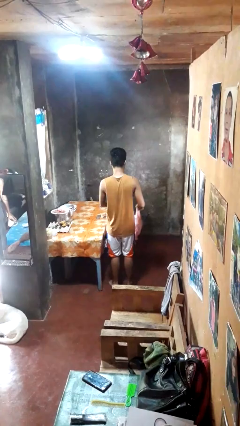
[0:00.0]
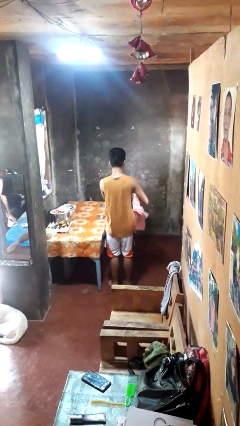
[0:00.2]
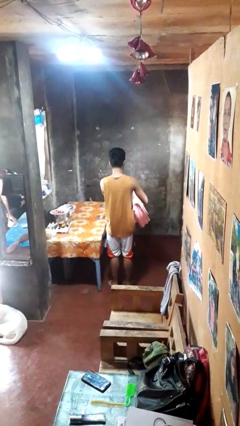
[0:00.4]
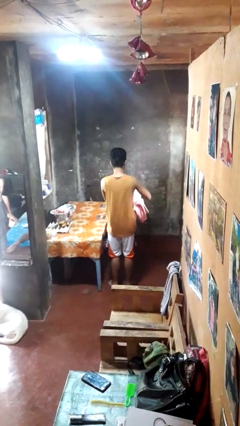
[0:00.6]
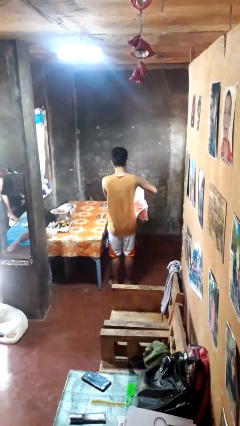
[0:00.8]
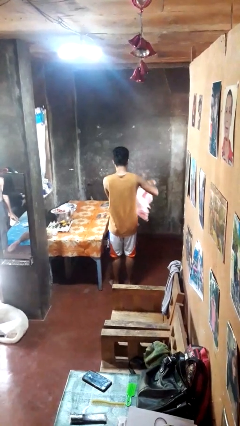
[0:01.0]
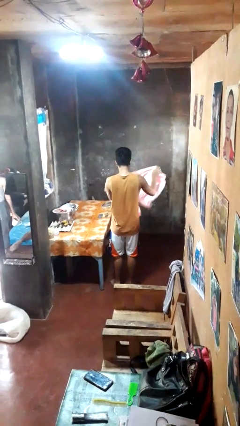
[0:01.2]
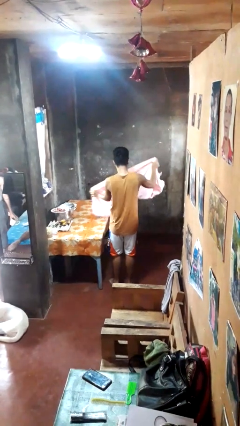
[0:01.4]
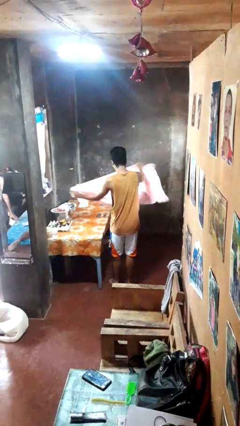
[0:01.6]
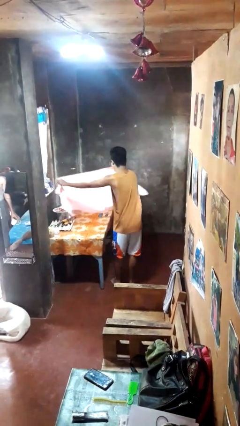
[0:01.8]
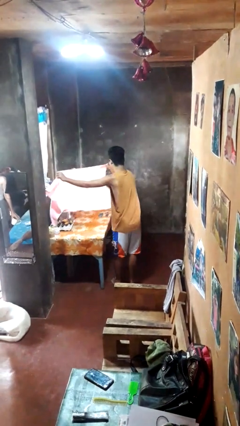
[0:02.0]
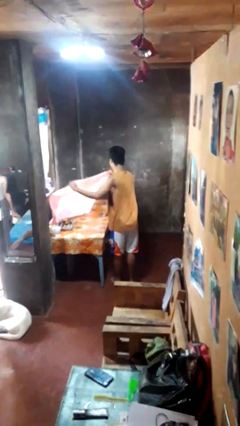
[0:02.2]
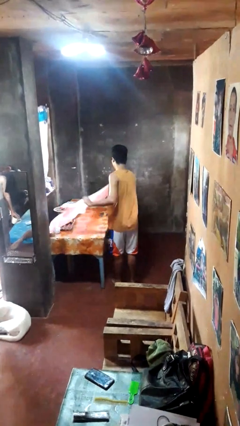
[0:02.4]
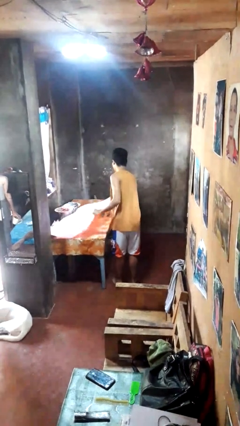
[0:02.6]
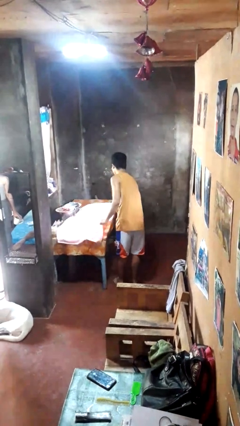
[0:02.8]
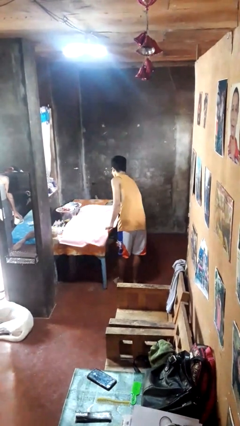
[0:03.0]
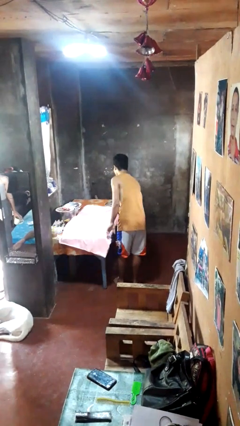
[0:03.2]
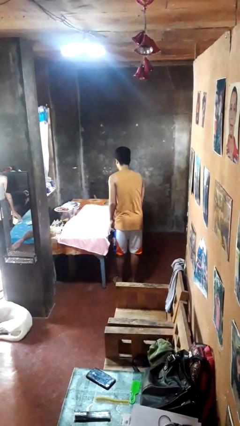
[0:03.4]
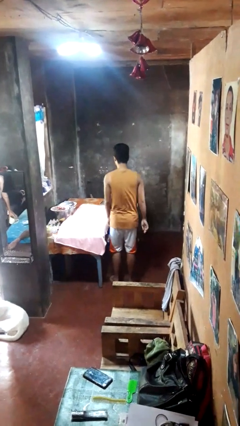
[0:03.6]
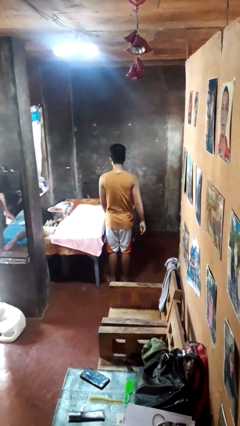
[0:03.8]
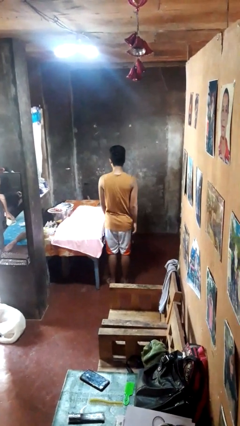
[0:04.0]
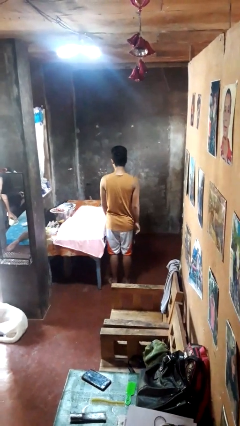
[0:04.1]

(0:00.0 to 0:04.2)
person spreads tablecloth

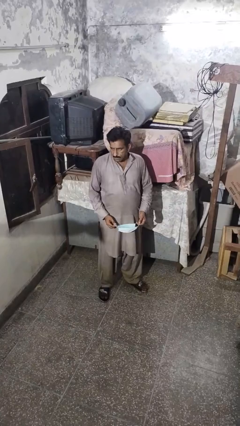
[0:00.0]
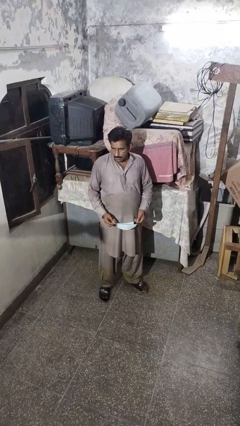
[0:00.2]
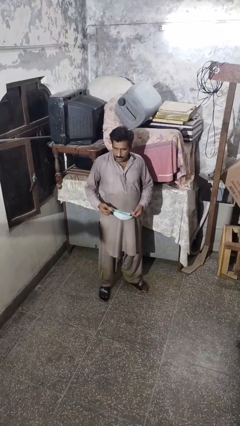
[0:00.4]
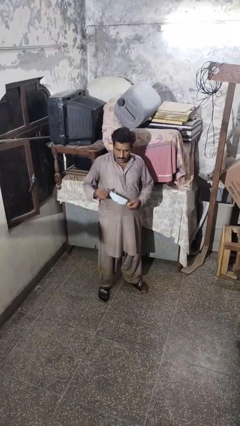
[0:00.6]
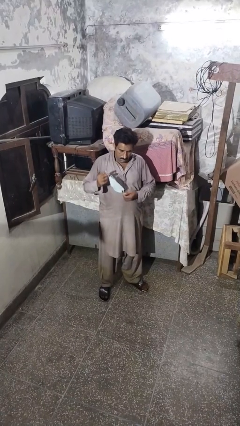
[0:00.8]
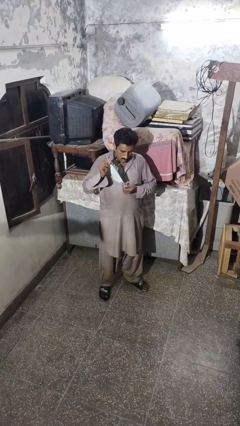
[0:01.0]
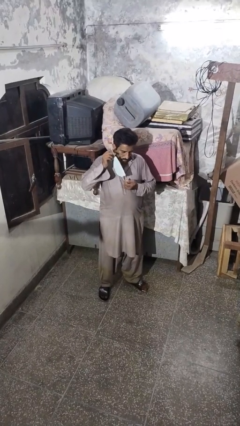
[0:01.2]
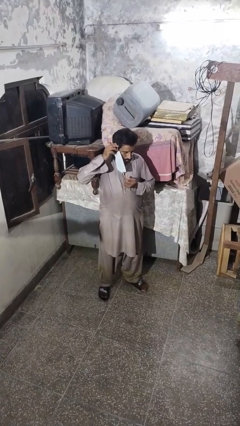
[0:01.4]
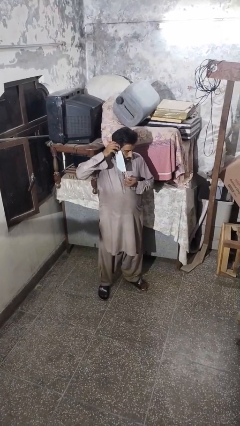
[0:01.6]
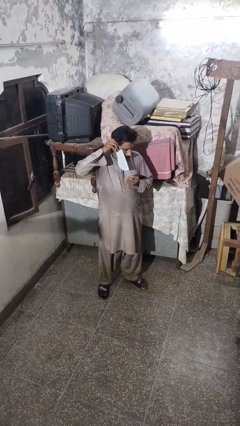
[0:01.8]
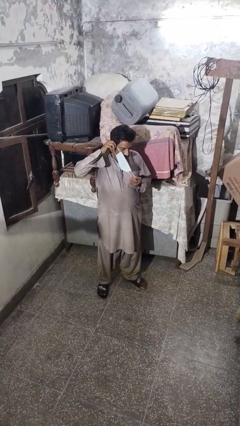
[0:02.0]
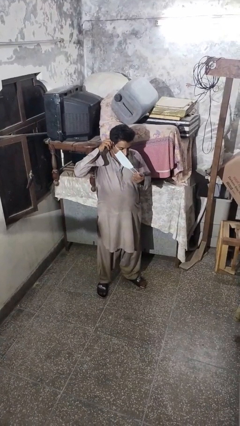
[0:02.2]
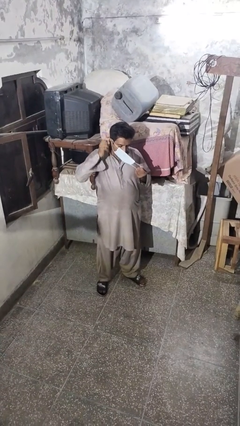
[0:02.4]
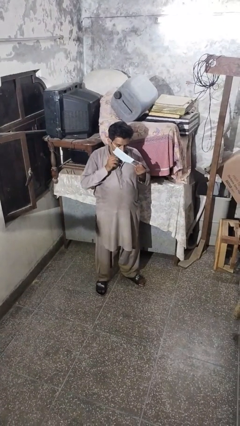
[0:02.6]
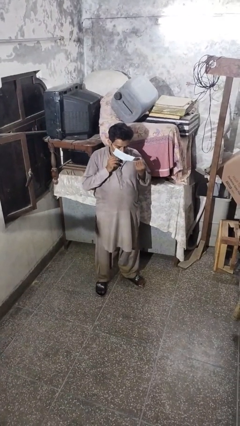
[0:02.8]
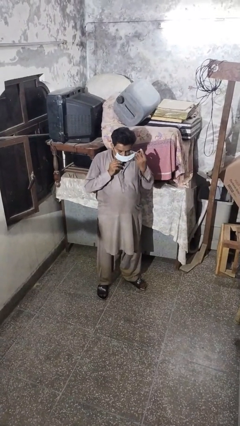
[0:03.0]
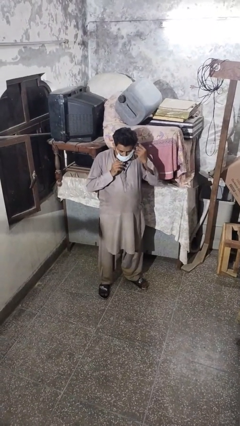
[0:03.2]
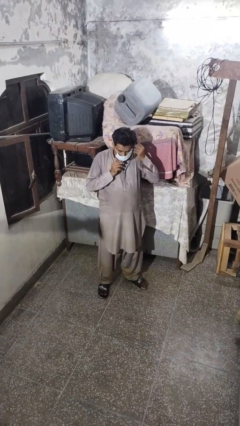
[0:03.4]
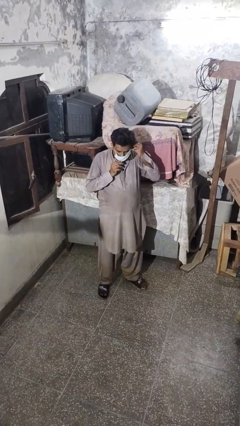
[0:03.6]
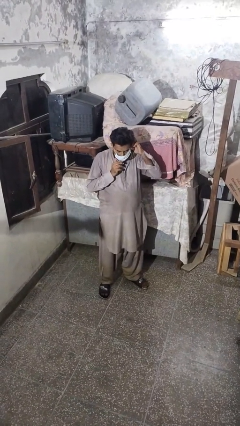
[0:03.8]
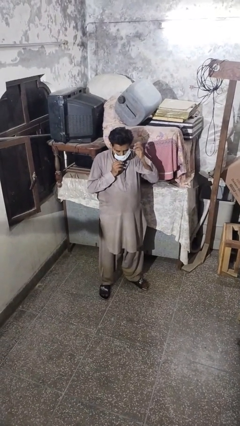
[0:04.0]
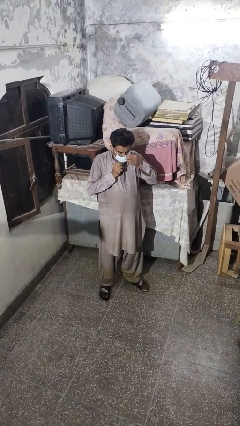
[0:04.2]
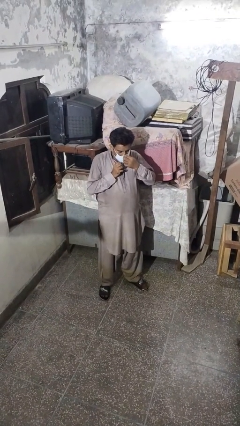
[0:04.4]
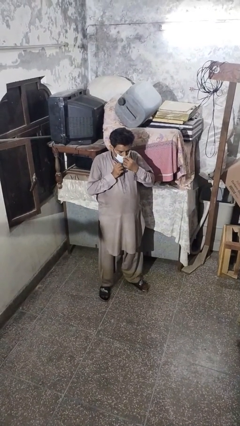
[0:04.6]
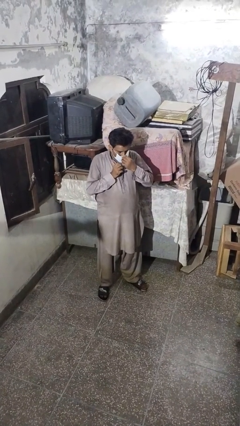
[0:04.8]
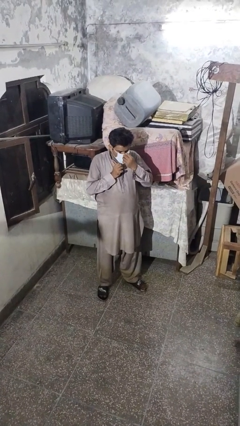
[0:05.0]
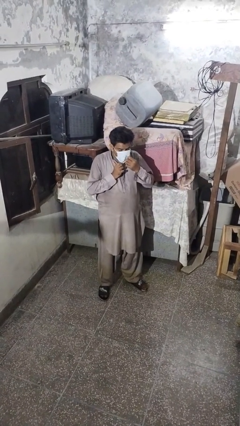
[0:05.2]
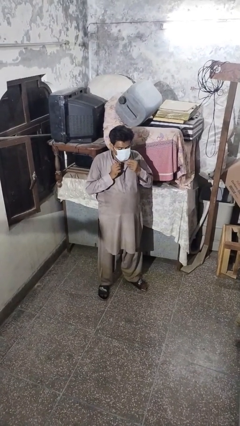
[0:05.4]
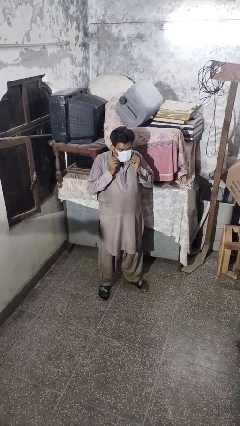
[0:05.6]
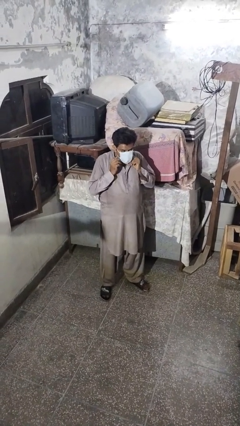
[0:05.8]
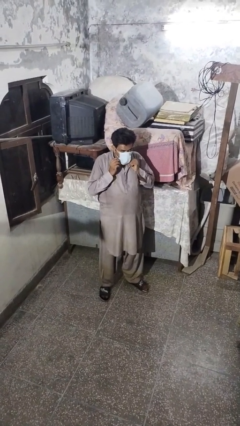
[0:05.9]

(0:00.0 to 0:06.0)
person puts on facemask

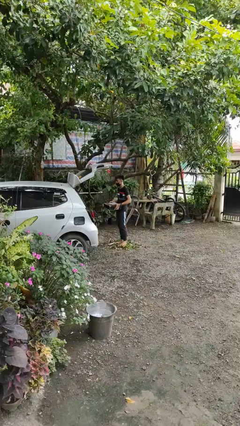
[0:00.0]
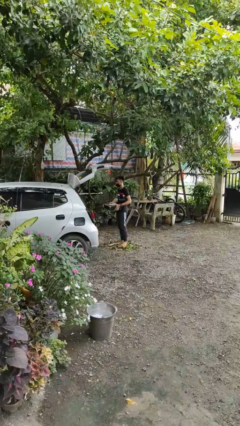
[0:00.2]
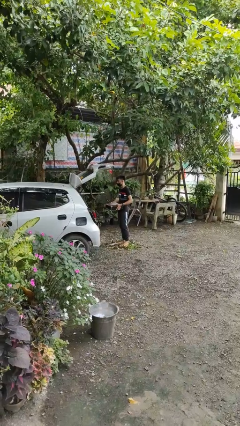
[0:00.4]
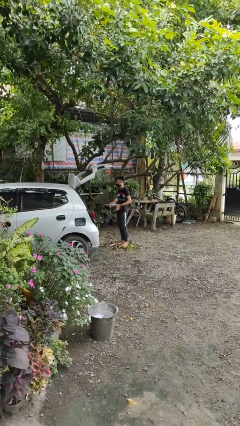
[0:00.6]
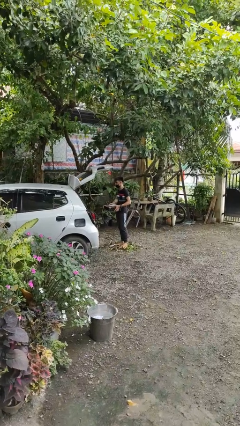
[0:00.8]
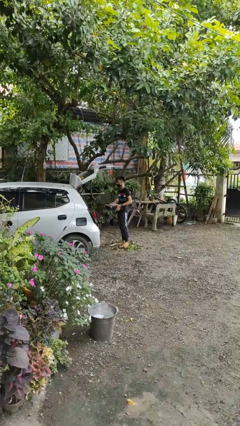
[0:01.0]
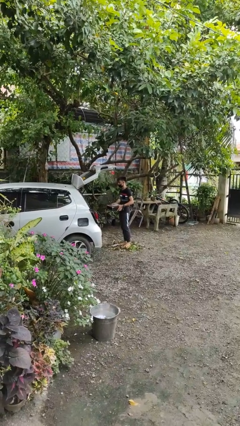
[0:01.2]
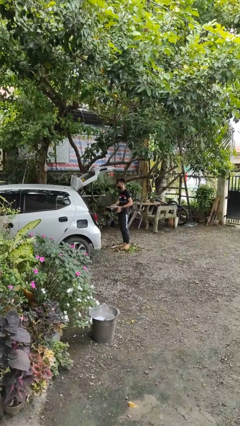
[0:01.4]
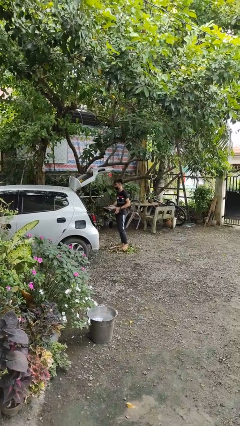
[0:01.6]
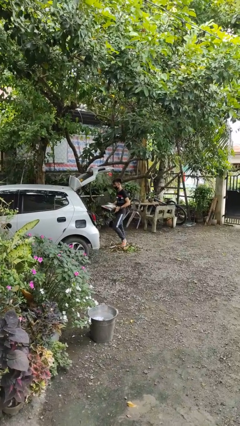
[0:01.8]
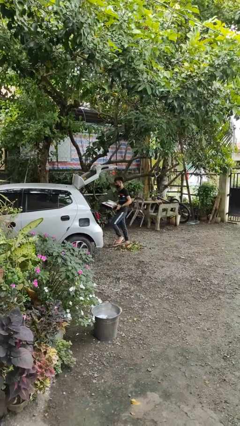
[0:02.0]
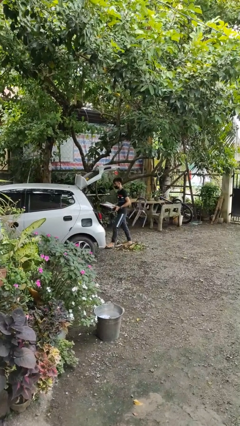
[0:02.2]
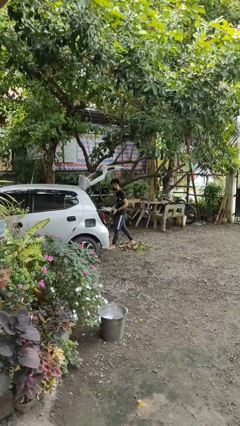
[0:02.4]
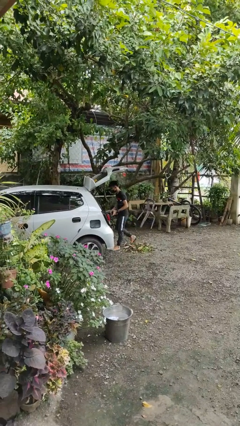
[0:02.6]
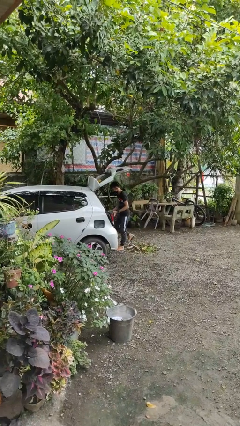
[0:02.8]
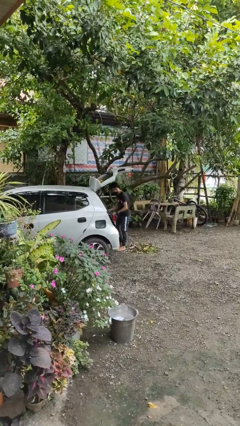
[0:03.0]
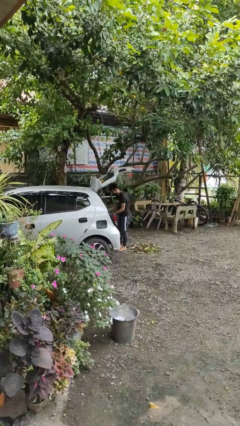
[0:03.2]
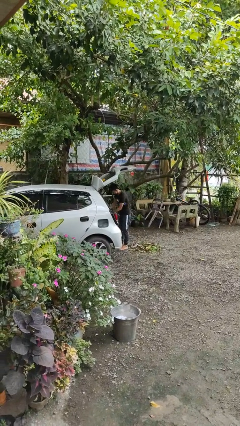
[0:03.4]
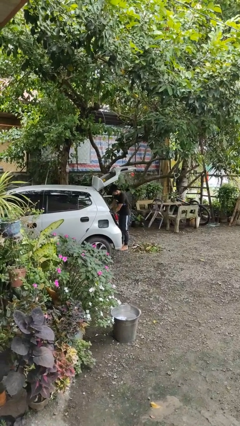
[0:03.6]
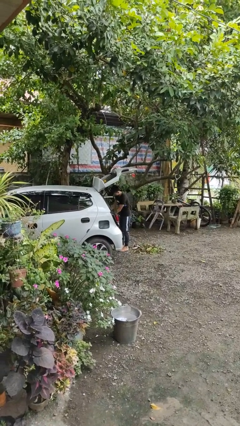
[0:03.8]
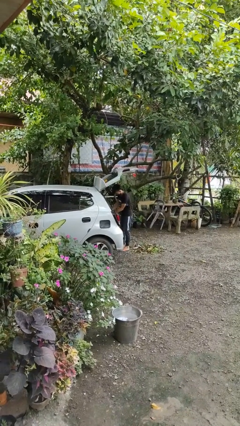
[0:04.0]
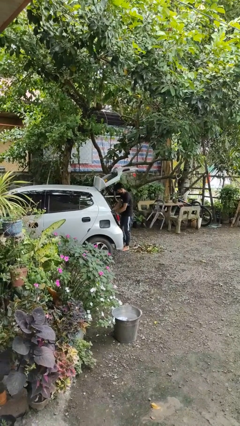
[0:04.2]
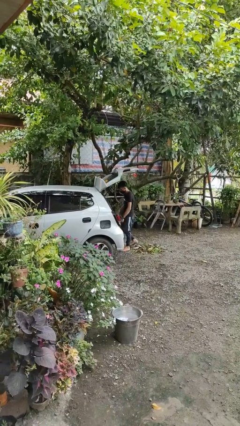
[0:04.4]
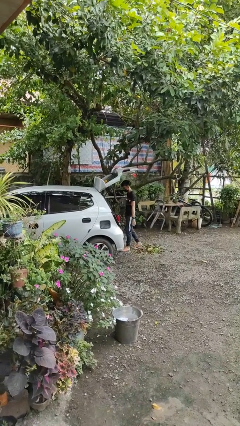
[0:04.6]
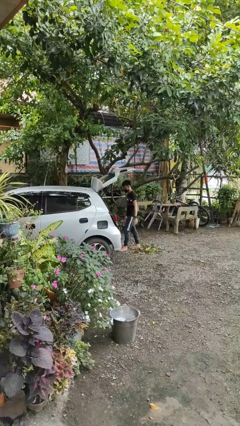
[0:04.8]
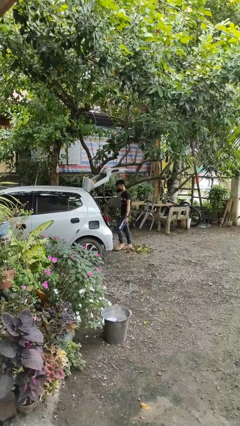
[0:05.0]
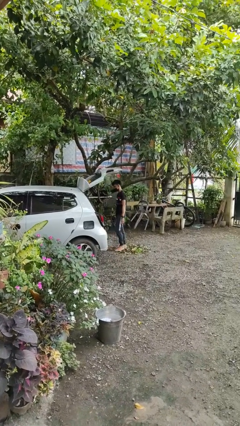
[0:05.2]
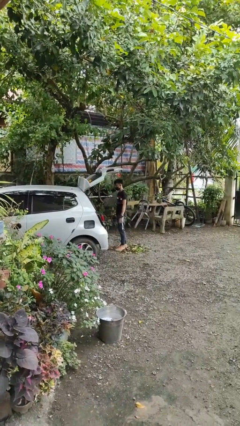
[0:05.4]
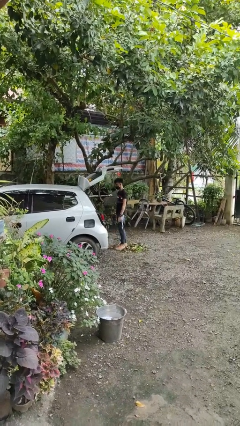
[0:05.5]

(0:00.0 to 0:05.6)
person loads car

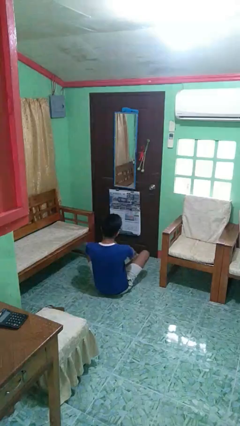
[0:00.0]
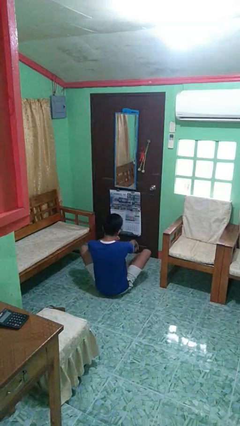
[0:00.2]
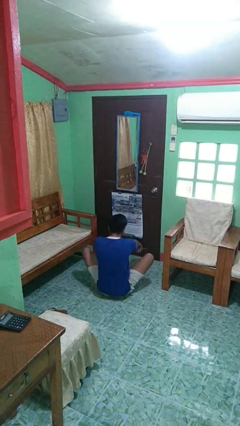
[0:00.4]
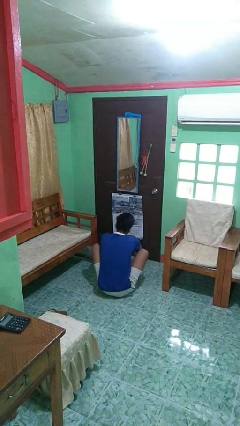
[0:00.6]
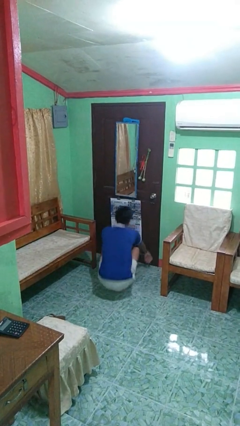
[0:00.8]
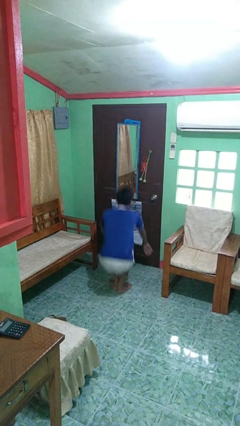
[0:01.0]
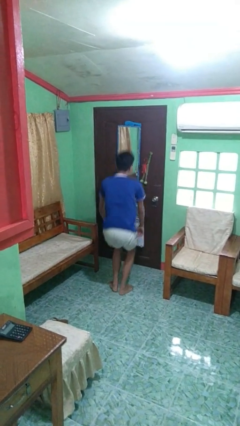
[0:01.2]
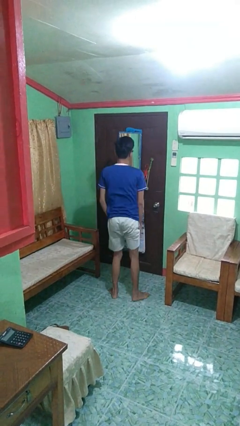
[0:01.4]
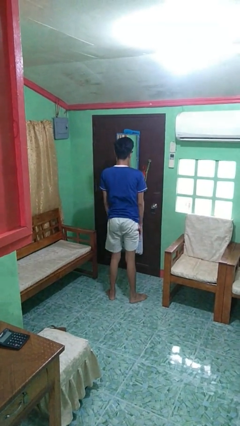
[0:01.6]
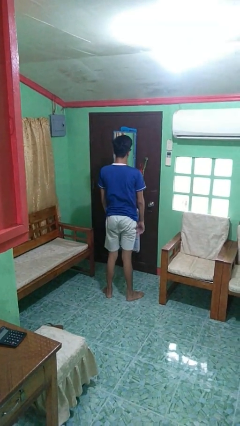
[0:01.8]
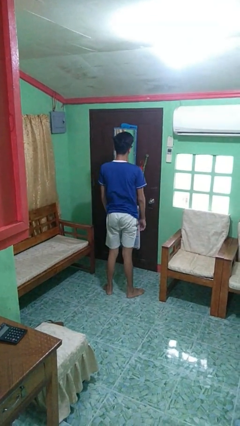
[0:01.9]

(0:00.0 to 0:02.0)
person stands up from floor

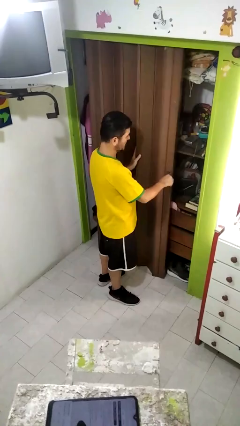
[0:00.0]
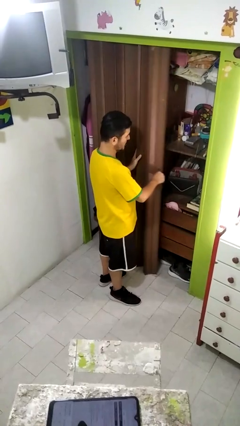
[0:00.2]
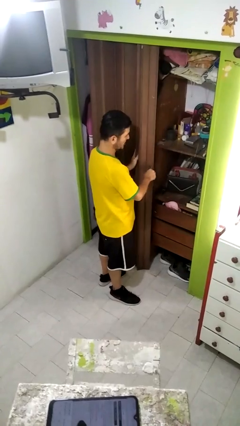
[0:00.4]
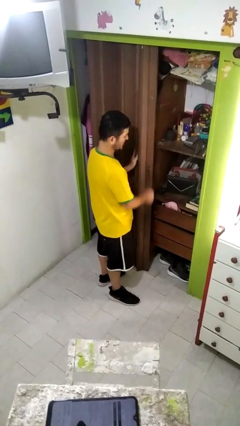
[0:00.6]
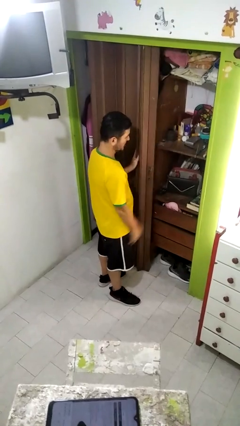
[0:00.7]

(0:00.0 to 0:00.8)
person opens closet door
